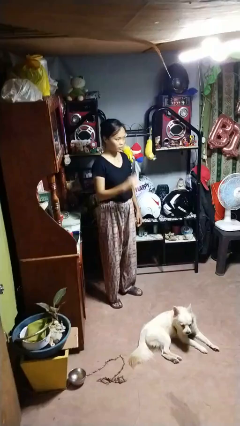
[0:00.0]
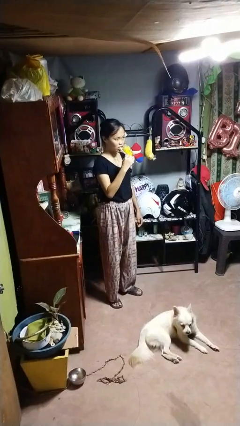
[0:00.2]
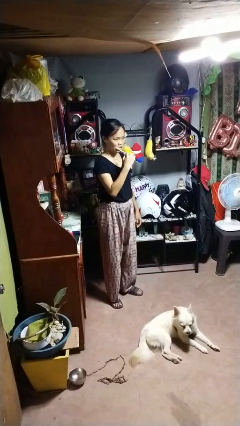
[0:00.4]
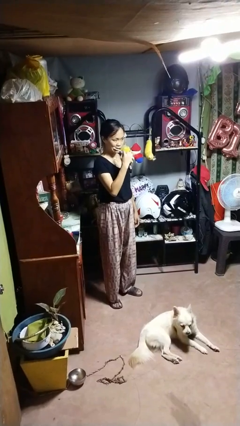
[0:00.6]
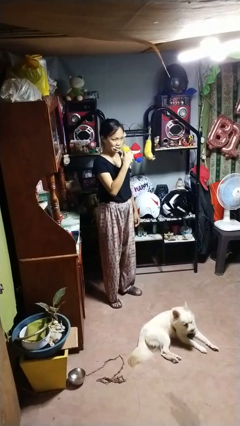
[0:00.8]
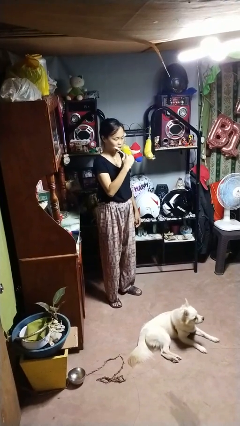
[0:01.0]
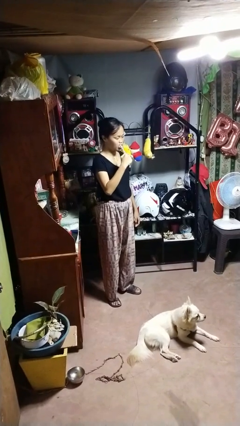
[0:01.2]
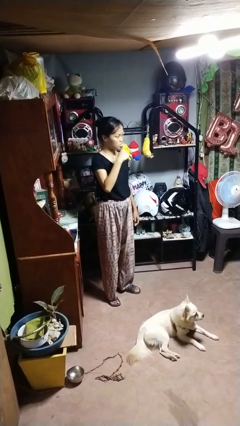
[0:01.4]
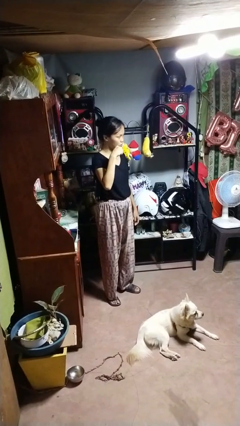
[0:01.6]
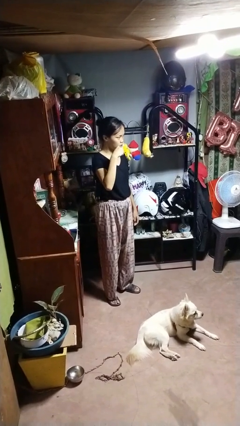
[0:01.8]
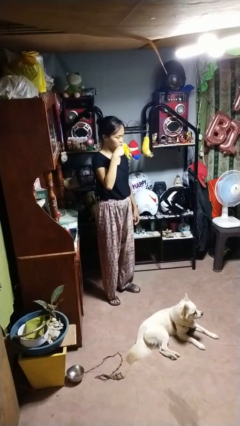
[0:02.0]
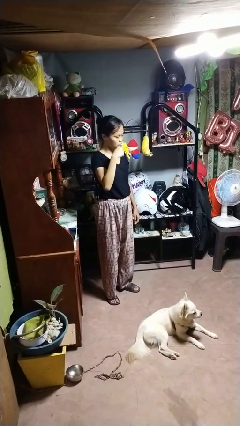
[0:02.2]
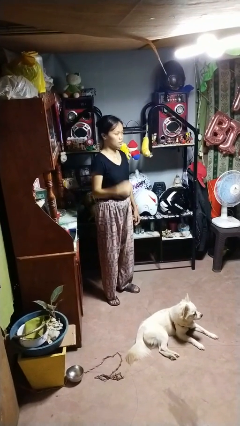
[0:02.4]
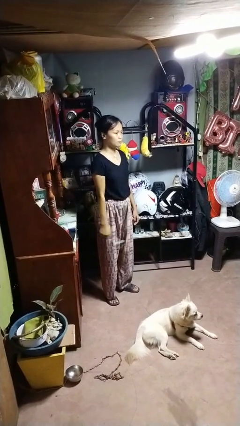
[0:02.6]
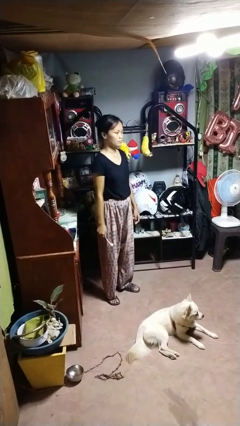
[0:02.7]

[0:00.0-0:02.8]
person brushes teeth

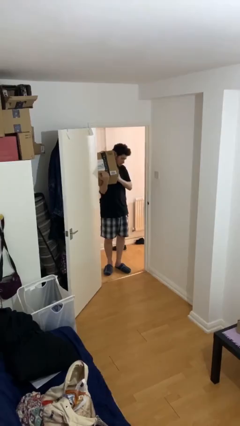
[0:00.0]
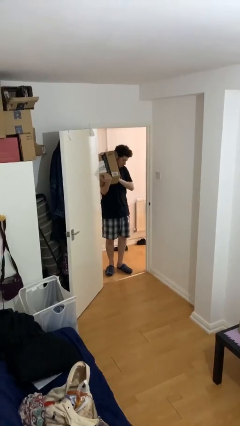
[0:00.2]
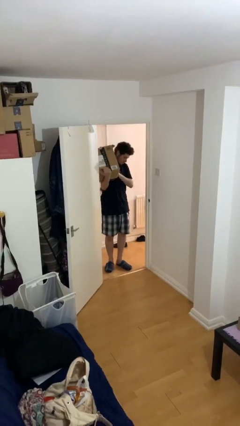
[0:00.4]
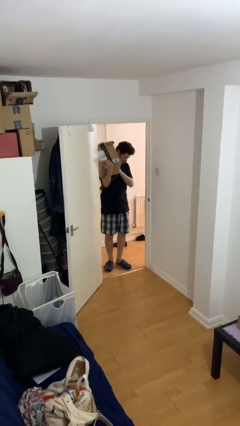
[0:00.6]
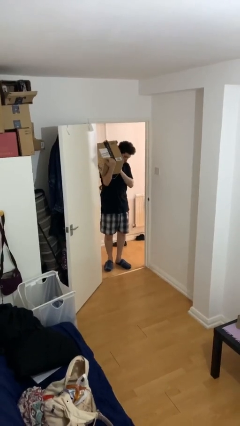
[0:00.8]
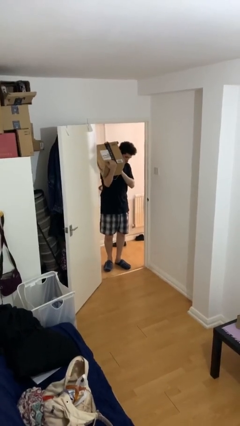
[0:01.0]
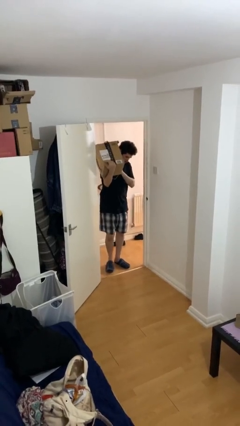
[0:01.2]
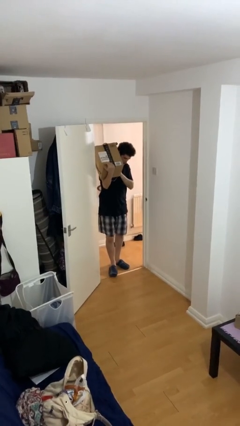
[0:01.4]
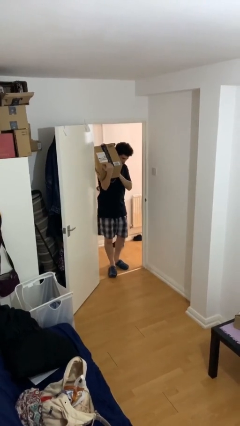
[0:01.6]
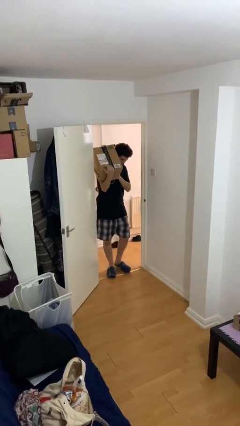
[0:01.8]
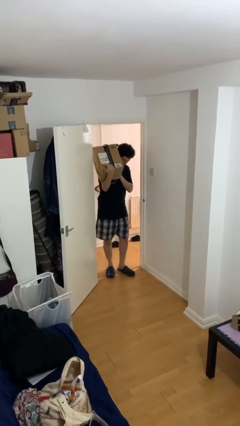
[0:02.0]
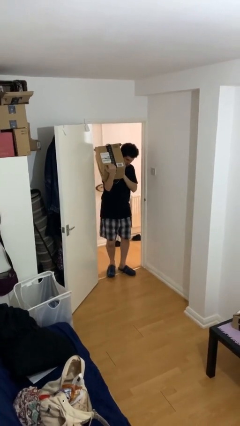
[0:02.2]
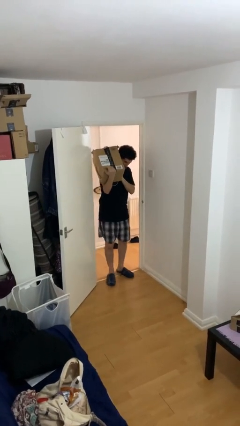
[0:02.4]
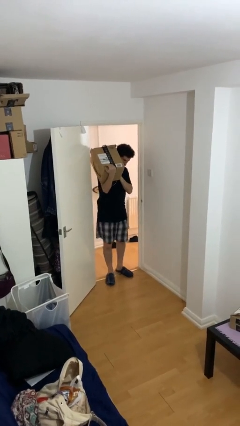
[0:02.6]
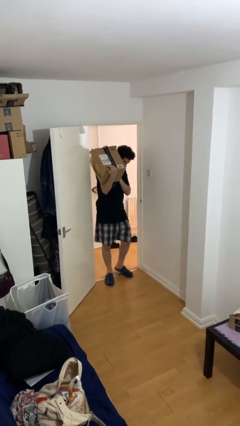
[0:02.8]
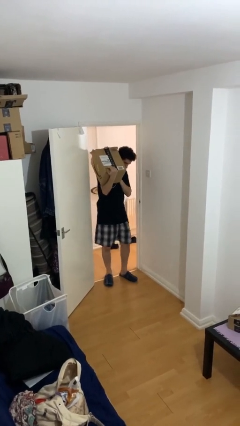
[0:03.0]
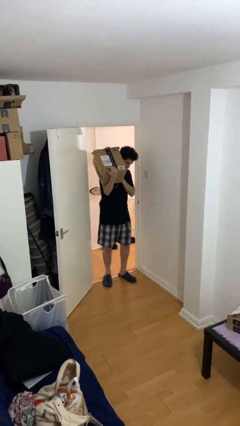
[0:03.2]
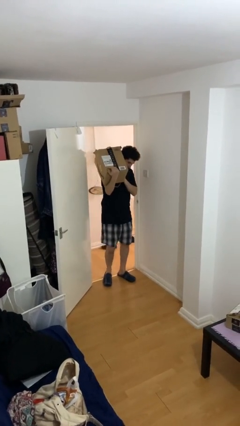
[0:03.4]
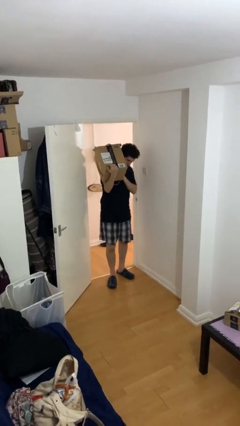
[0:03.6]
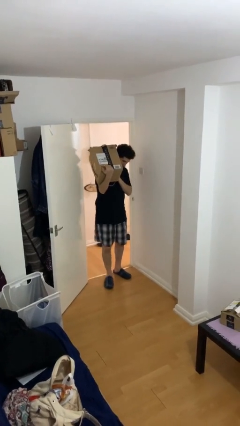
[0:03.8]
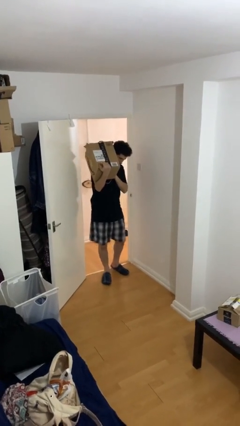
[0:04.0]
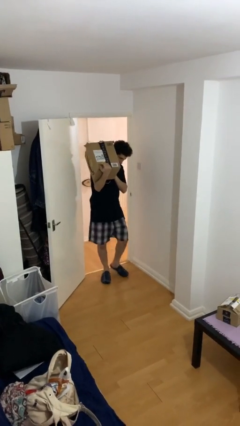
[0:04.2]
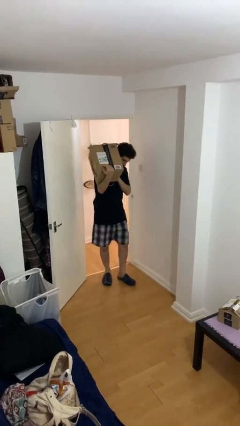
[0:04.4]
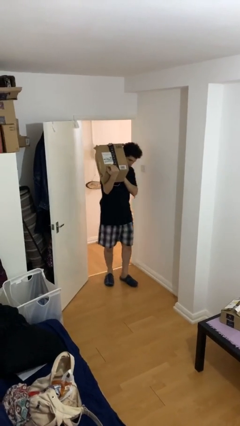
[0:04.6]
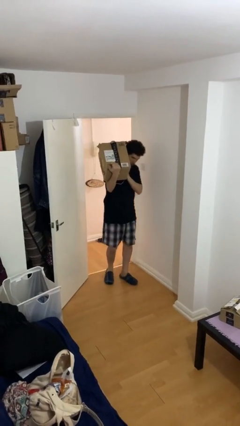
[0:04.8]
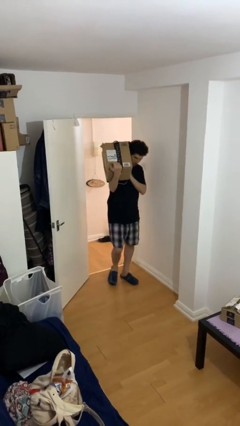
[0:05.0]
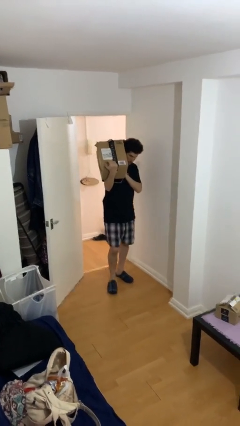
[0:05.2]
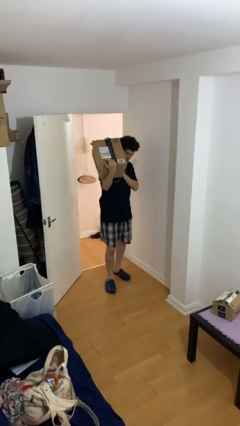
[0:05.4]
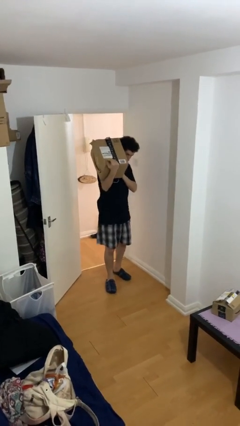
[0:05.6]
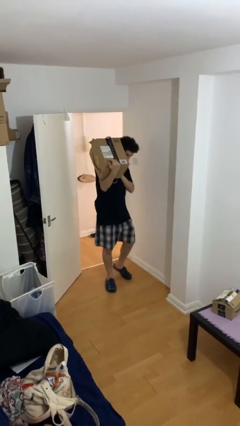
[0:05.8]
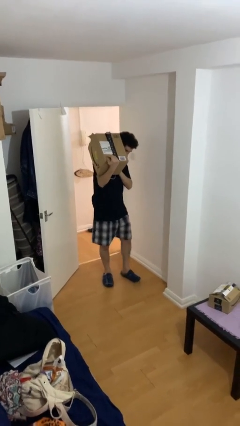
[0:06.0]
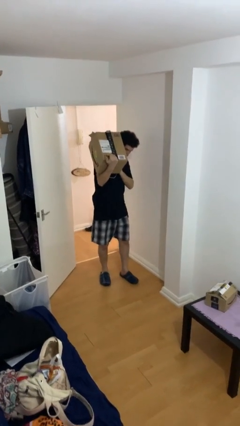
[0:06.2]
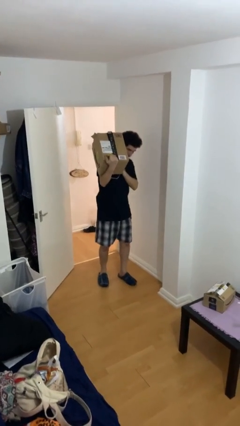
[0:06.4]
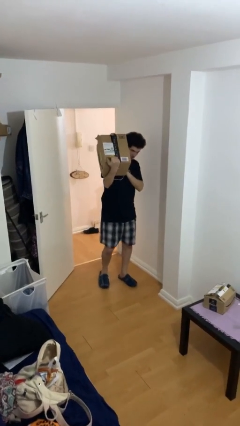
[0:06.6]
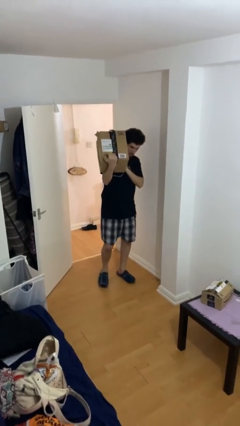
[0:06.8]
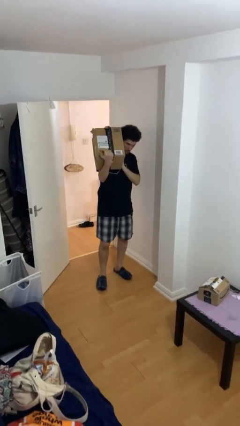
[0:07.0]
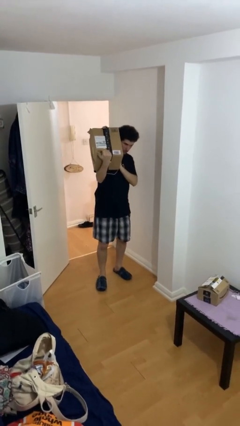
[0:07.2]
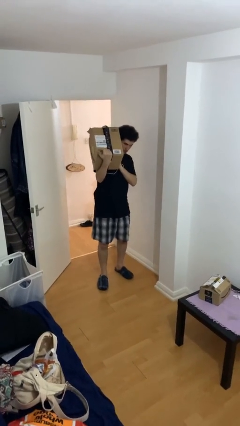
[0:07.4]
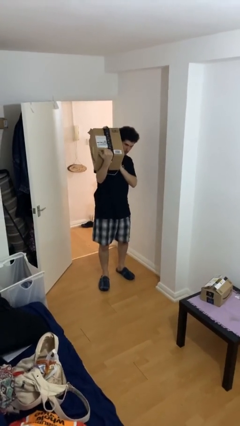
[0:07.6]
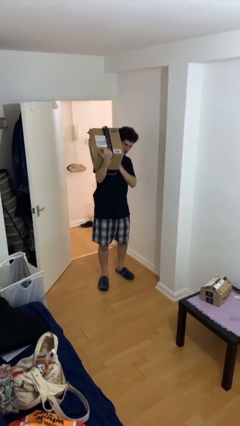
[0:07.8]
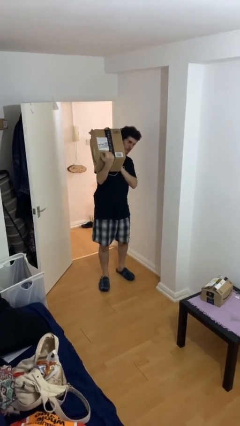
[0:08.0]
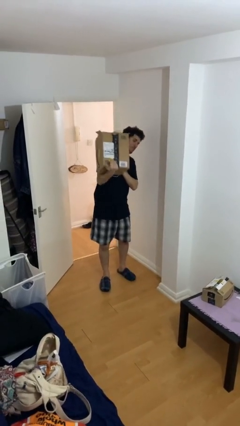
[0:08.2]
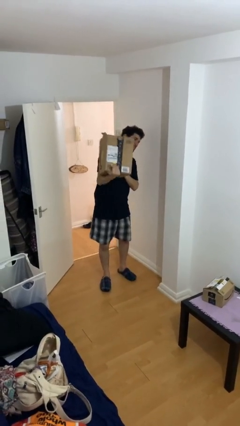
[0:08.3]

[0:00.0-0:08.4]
person carries heavy object

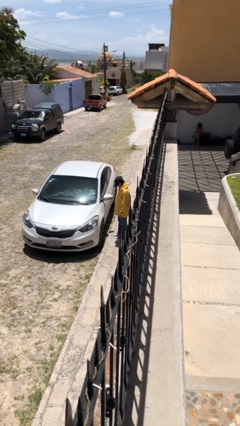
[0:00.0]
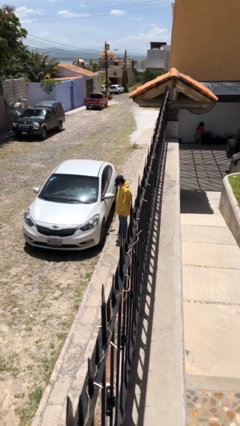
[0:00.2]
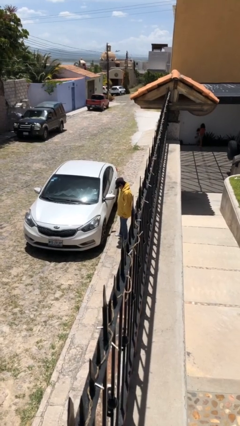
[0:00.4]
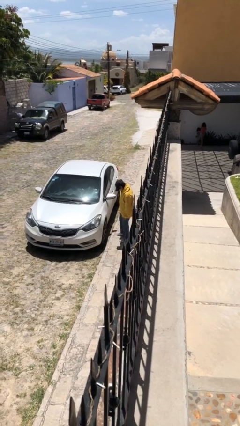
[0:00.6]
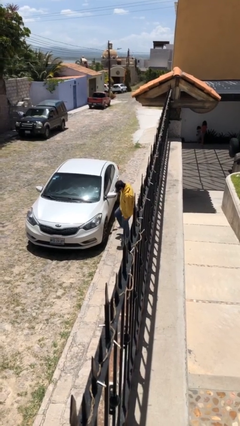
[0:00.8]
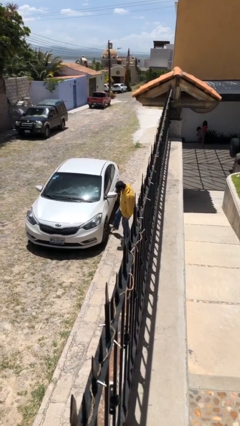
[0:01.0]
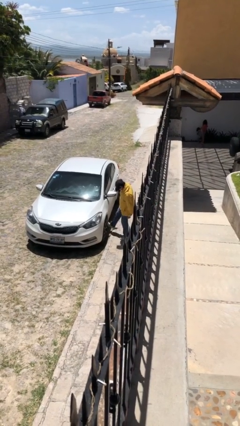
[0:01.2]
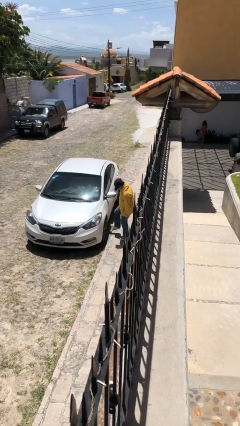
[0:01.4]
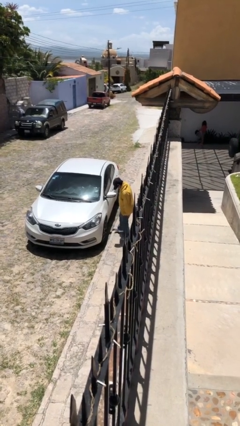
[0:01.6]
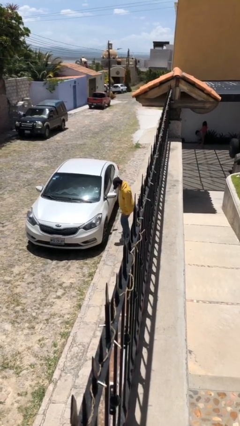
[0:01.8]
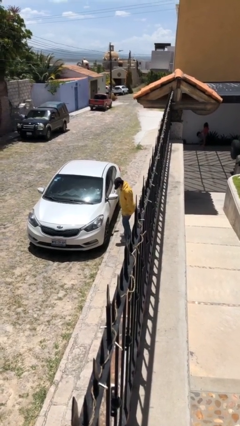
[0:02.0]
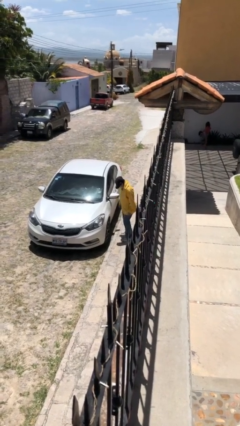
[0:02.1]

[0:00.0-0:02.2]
person kicks car tires

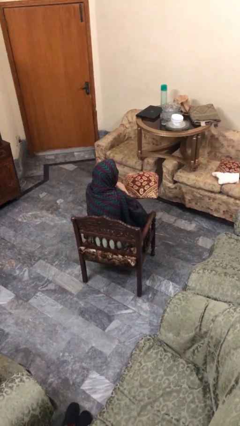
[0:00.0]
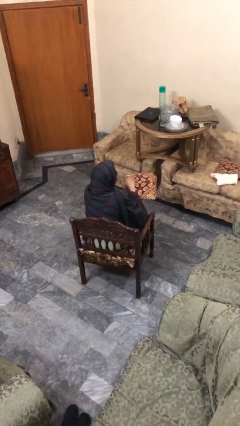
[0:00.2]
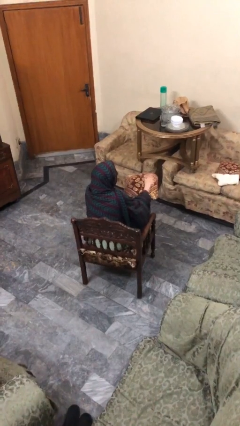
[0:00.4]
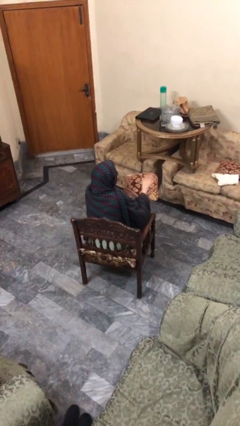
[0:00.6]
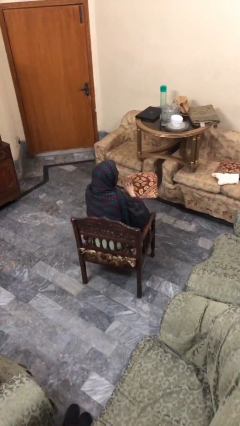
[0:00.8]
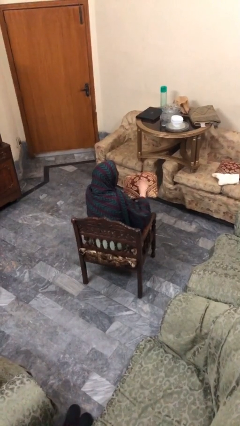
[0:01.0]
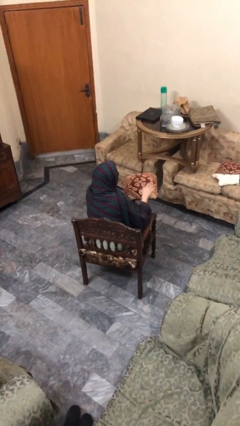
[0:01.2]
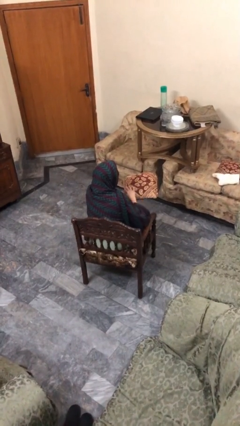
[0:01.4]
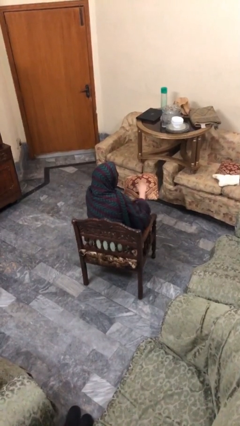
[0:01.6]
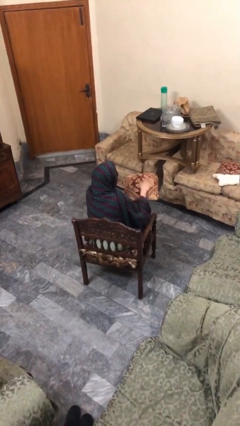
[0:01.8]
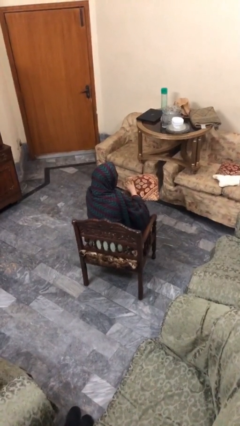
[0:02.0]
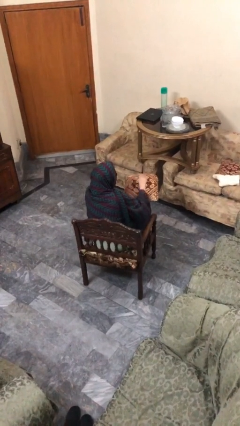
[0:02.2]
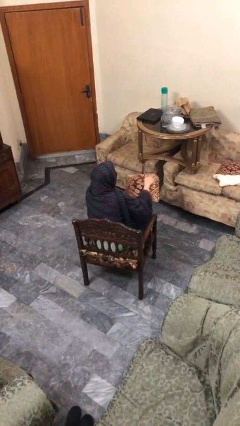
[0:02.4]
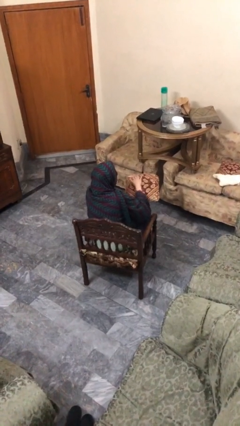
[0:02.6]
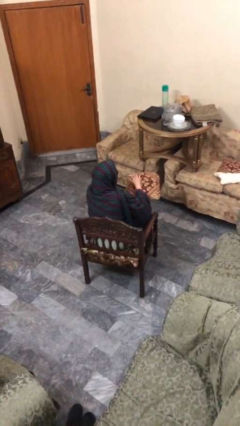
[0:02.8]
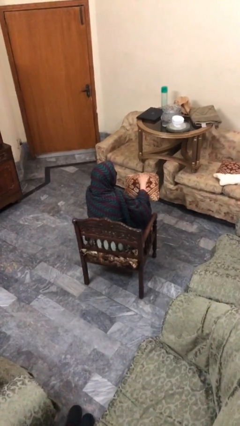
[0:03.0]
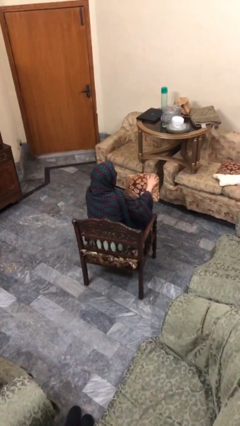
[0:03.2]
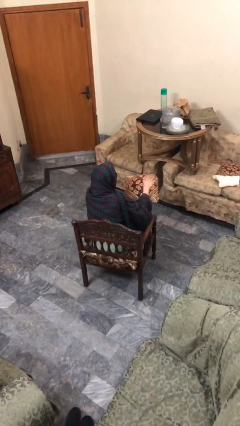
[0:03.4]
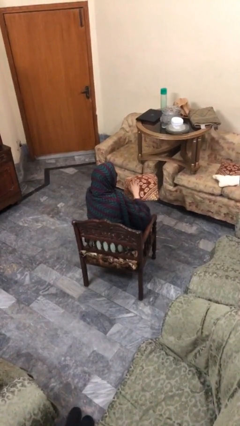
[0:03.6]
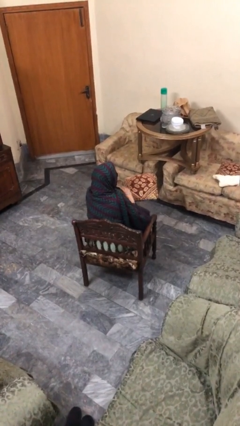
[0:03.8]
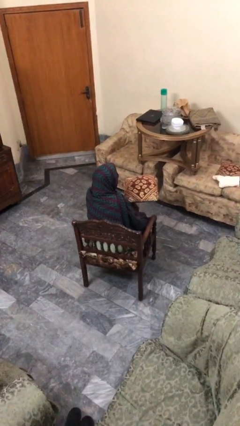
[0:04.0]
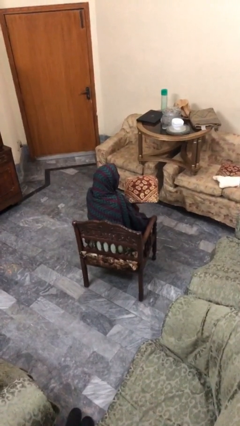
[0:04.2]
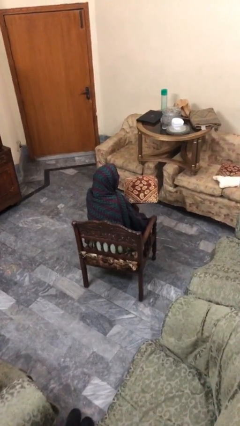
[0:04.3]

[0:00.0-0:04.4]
person waves hand over object
